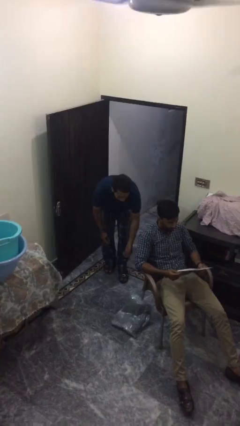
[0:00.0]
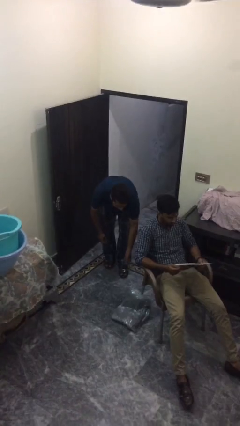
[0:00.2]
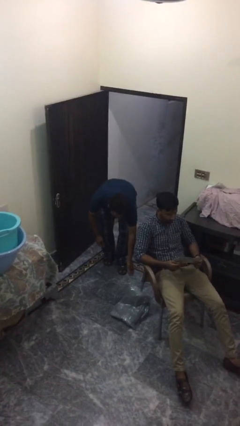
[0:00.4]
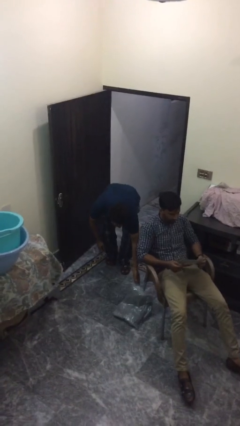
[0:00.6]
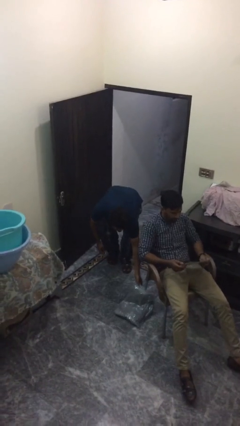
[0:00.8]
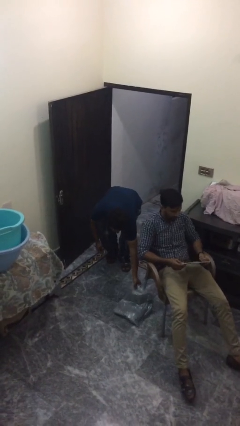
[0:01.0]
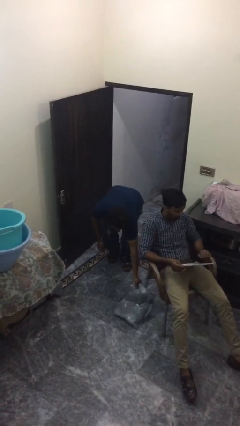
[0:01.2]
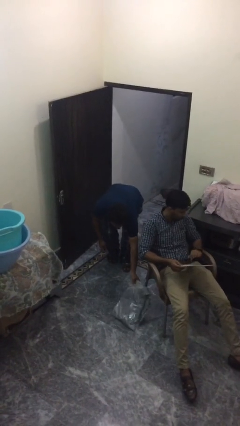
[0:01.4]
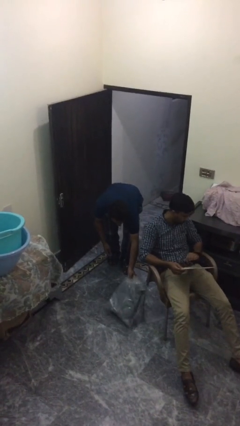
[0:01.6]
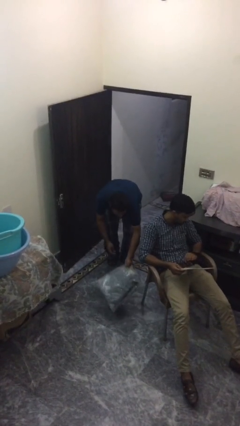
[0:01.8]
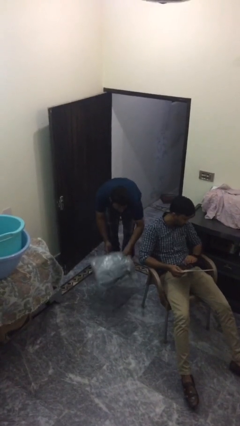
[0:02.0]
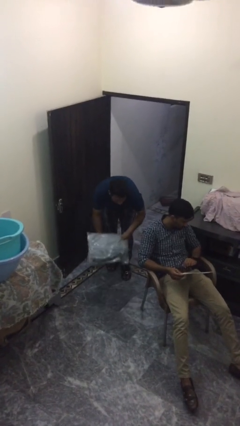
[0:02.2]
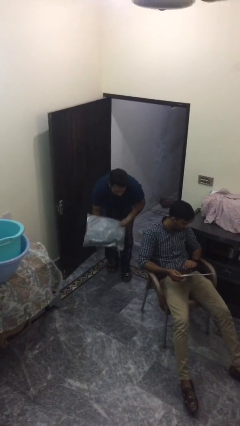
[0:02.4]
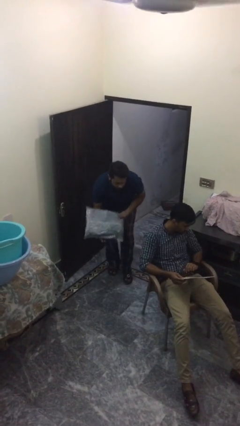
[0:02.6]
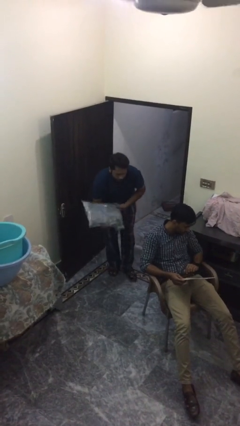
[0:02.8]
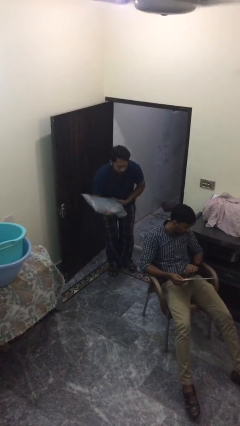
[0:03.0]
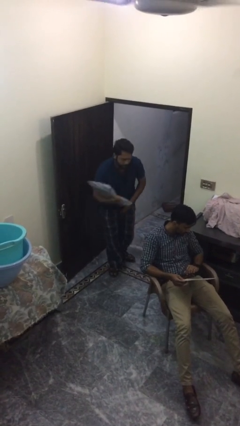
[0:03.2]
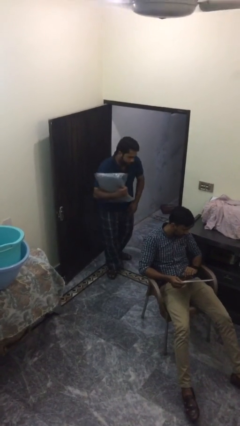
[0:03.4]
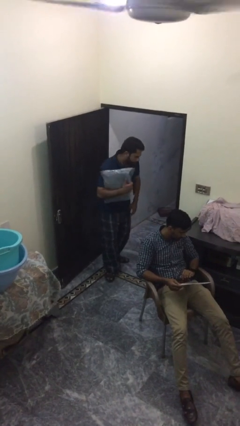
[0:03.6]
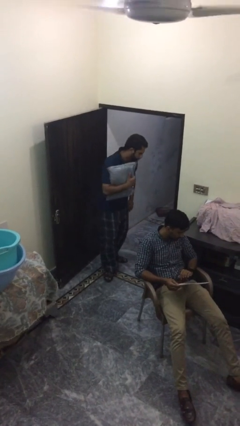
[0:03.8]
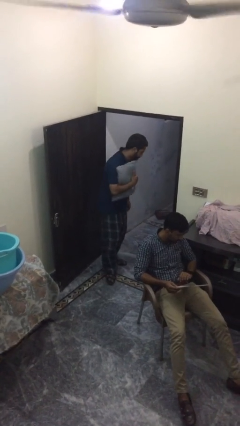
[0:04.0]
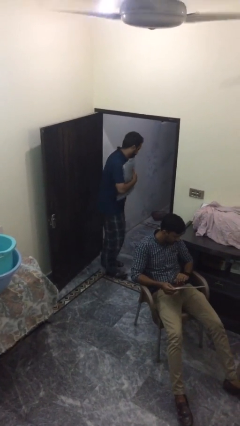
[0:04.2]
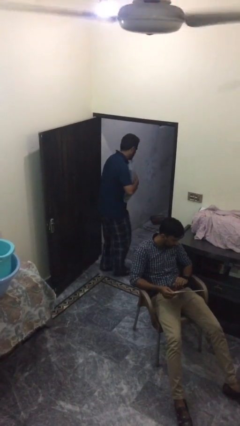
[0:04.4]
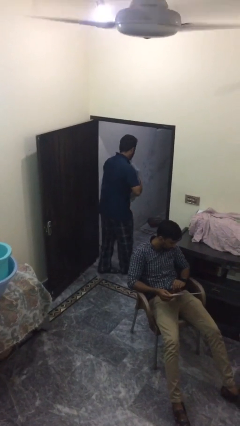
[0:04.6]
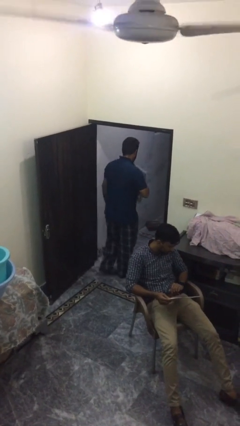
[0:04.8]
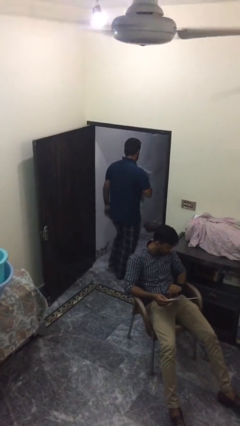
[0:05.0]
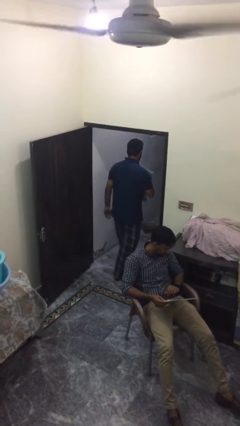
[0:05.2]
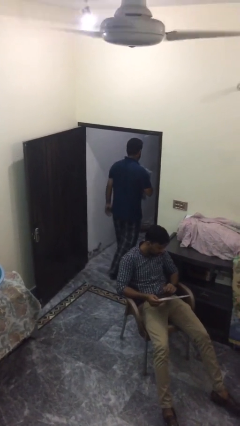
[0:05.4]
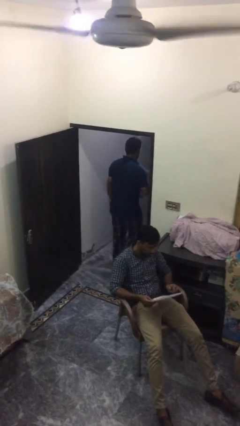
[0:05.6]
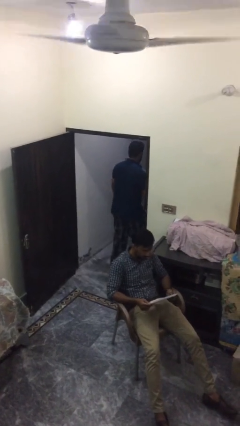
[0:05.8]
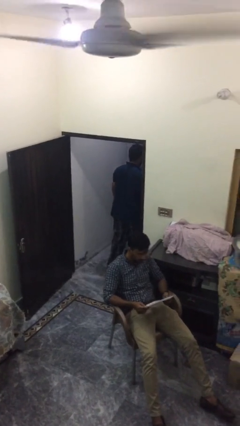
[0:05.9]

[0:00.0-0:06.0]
person steals object from person

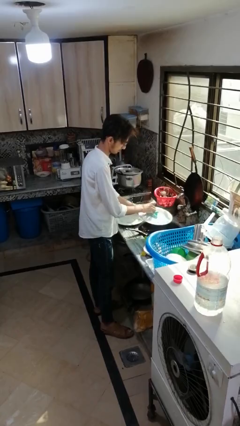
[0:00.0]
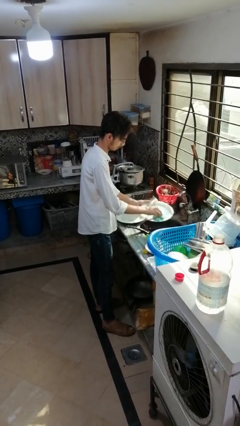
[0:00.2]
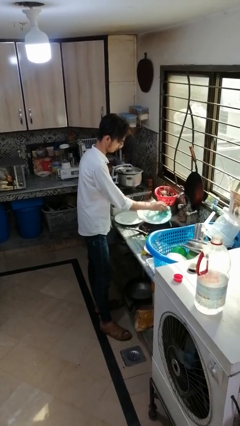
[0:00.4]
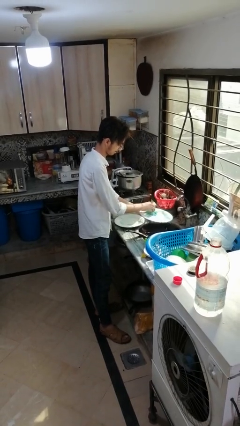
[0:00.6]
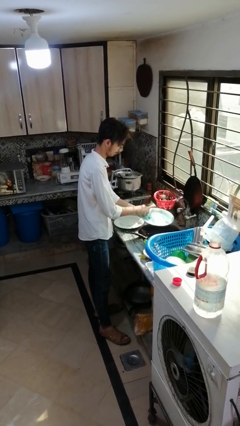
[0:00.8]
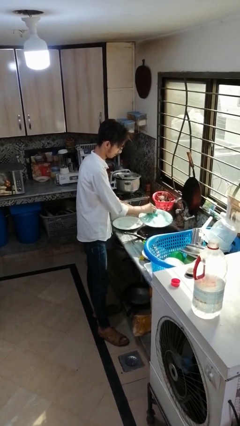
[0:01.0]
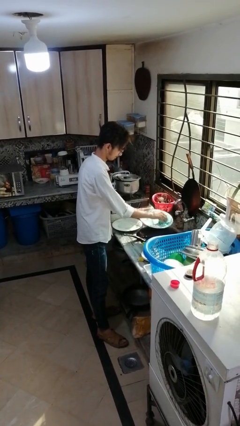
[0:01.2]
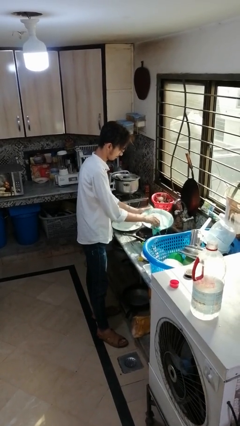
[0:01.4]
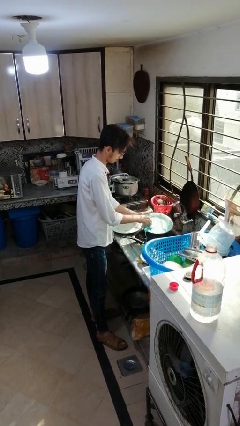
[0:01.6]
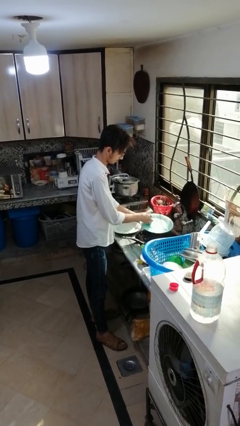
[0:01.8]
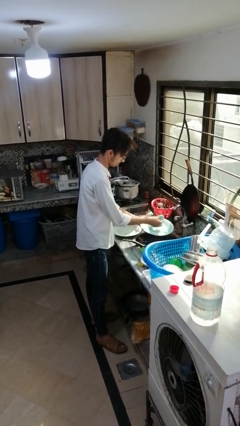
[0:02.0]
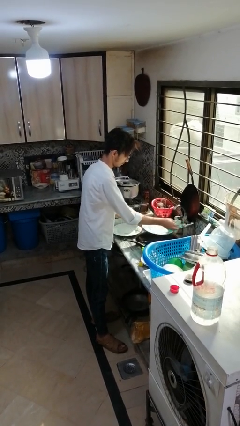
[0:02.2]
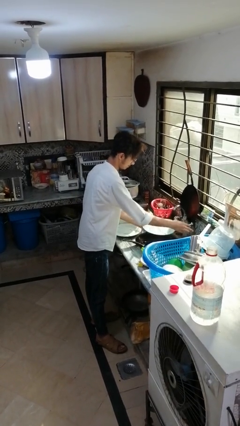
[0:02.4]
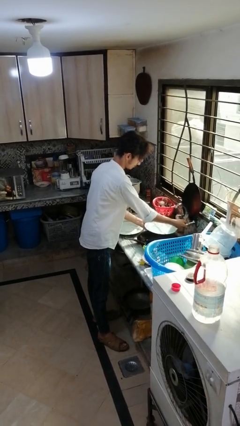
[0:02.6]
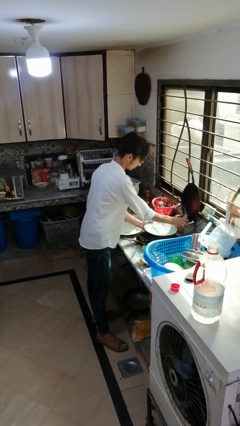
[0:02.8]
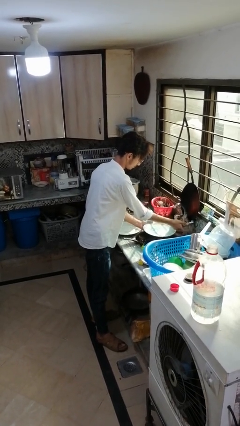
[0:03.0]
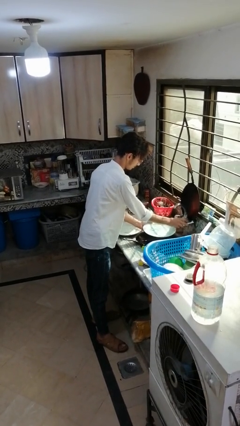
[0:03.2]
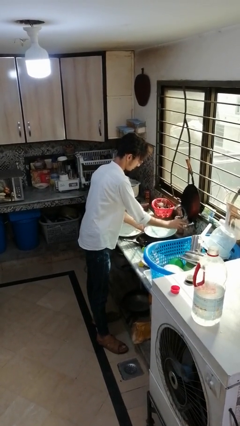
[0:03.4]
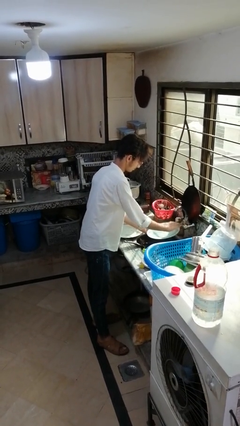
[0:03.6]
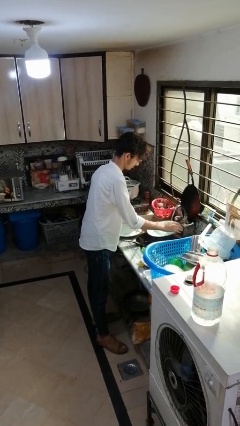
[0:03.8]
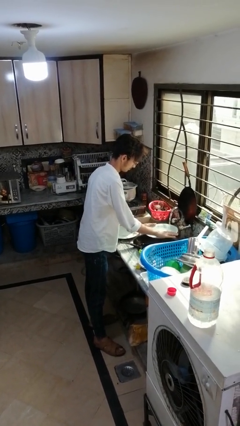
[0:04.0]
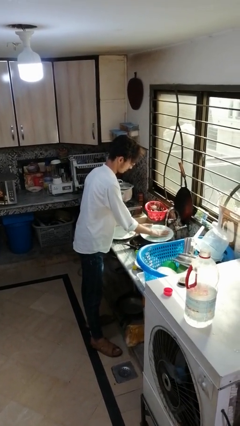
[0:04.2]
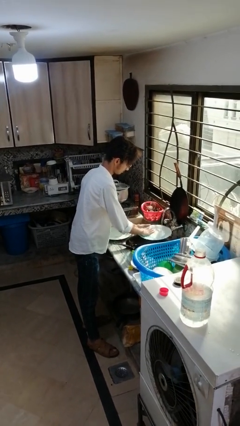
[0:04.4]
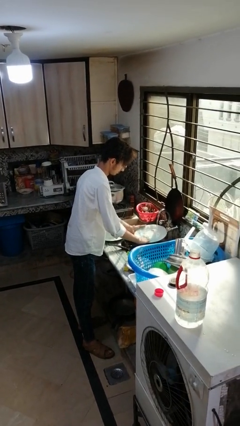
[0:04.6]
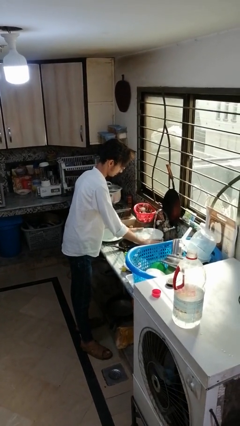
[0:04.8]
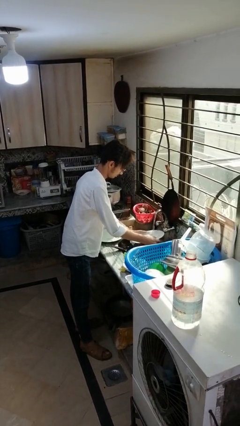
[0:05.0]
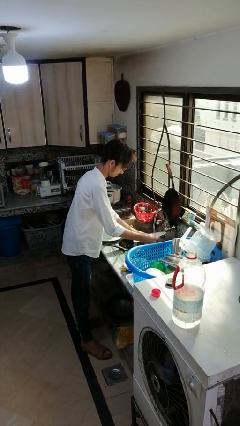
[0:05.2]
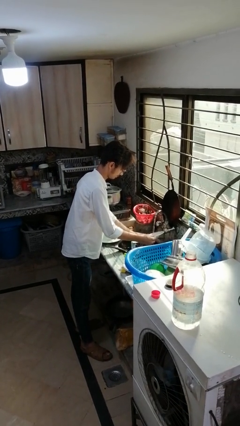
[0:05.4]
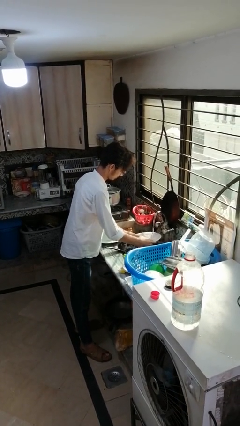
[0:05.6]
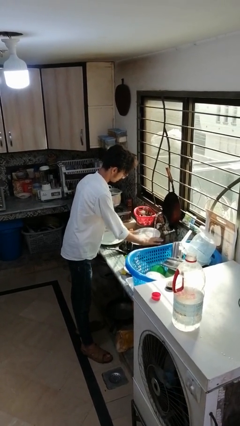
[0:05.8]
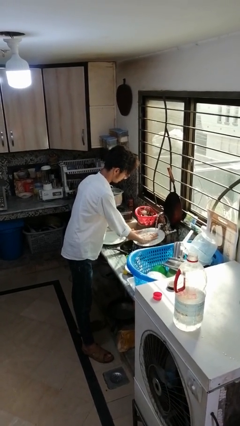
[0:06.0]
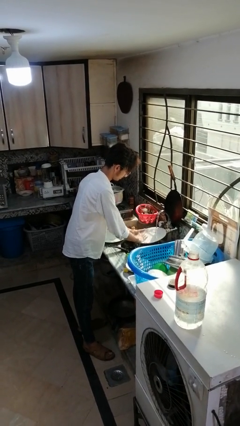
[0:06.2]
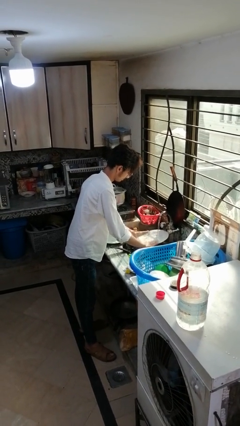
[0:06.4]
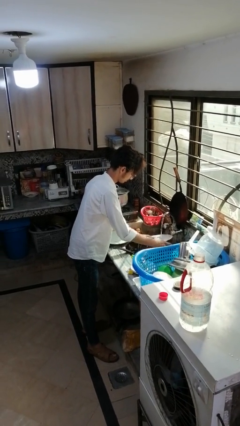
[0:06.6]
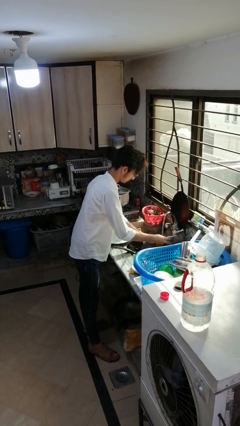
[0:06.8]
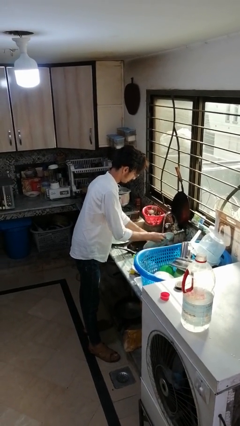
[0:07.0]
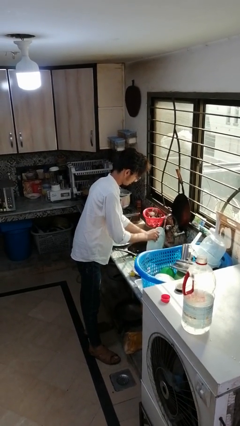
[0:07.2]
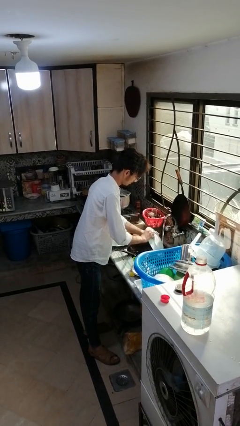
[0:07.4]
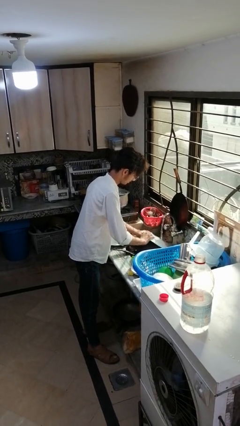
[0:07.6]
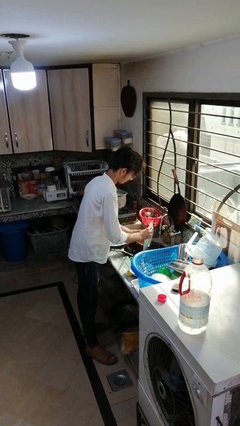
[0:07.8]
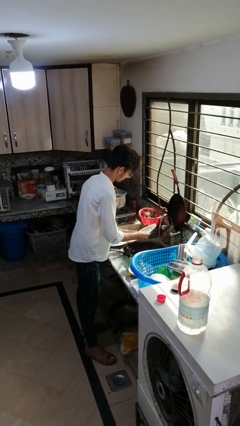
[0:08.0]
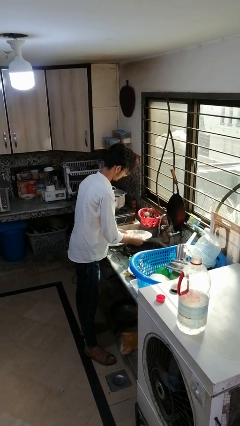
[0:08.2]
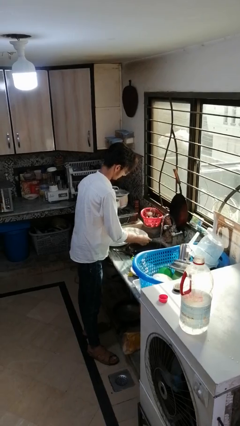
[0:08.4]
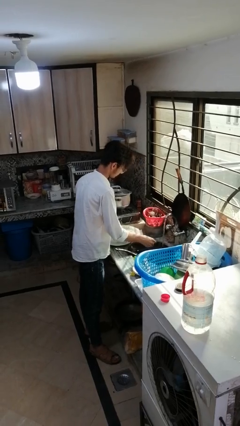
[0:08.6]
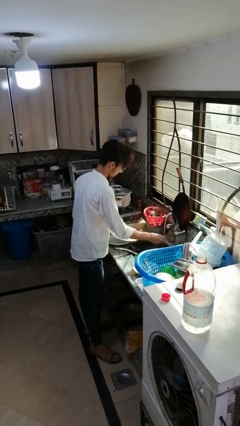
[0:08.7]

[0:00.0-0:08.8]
person washes dish

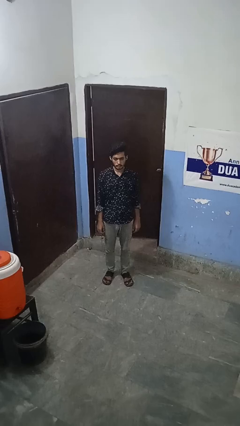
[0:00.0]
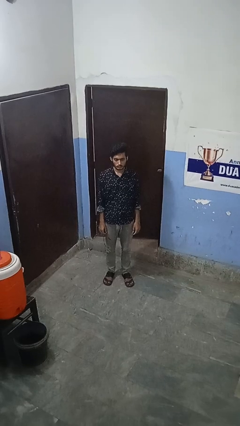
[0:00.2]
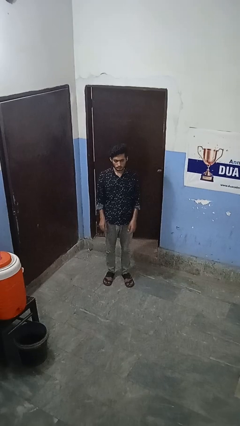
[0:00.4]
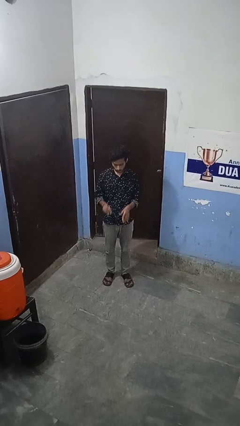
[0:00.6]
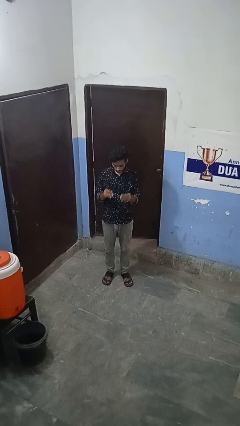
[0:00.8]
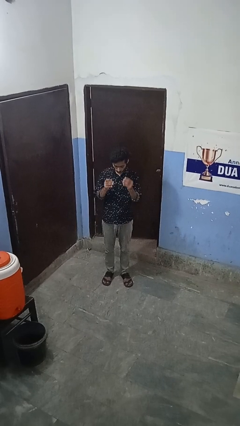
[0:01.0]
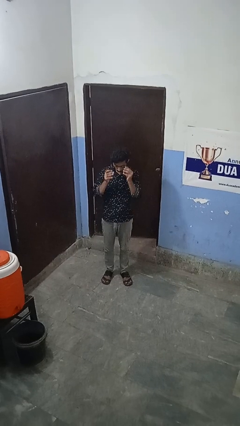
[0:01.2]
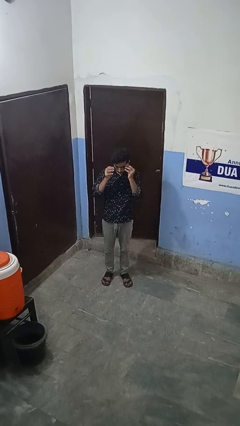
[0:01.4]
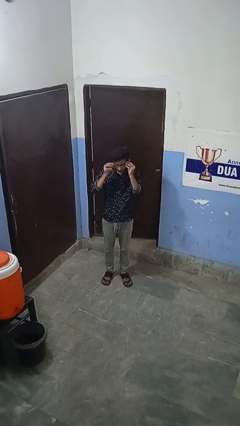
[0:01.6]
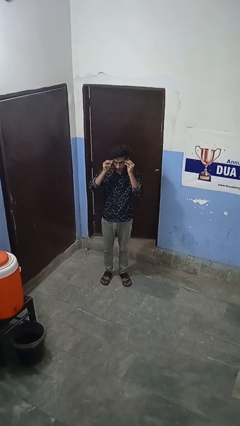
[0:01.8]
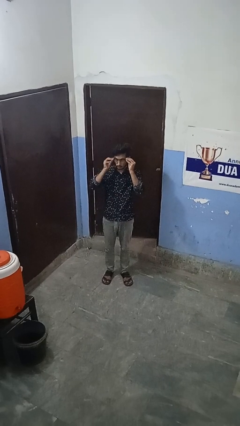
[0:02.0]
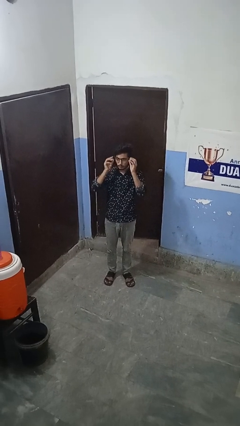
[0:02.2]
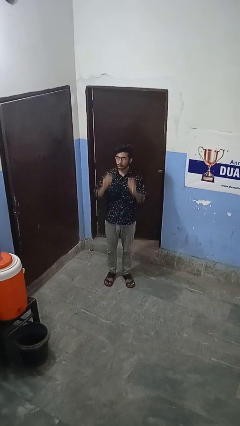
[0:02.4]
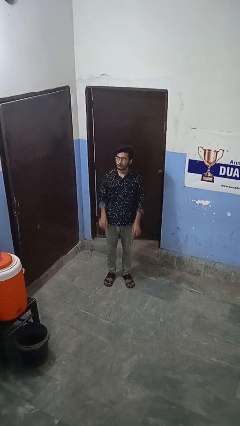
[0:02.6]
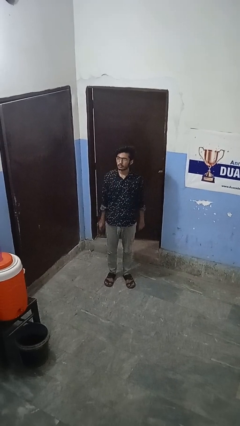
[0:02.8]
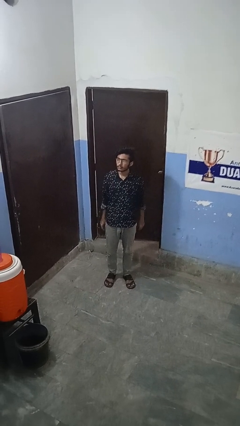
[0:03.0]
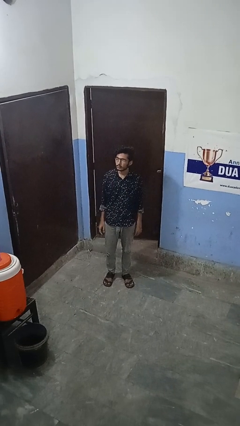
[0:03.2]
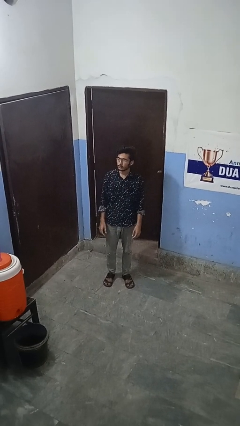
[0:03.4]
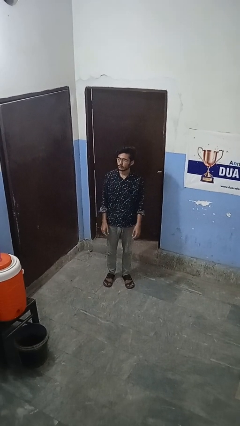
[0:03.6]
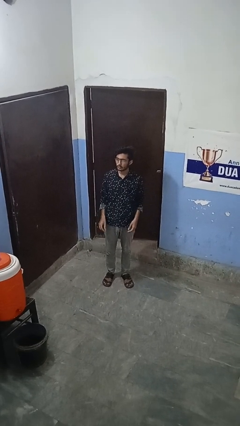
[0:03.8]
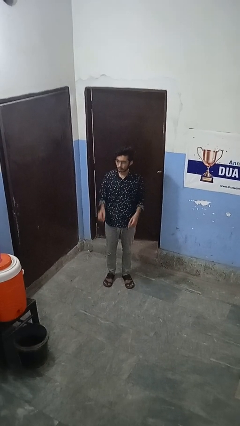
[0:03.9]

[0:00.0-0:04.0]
person puts on glasses
